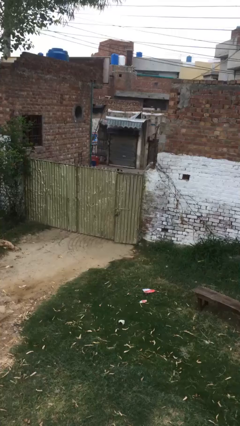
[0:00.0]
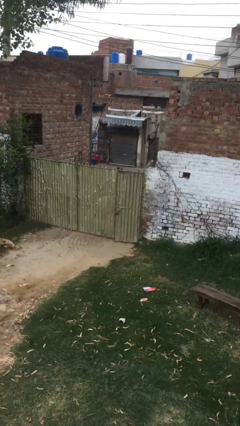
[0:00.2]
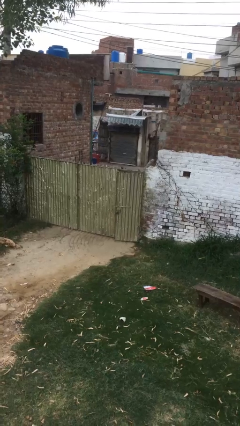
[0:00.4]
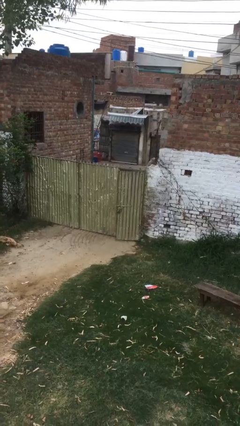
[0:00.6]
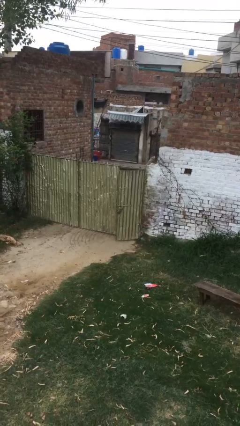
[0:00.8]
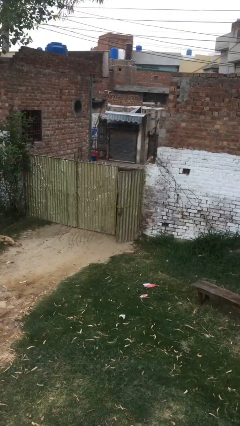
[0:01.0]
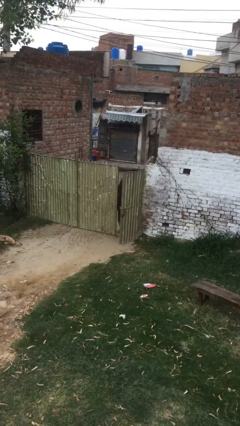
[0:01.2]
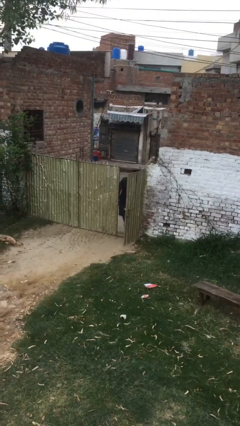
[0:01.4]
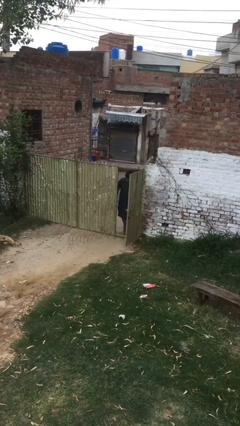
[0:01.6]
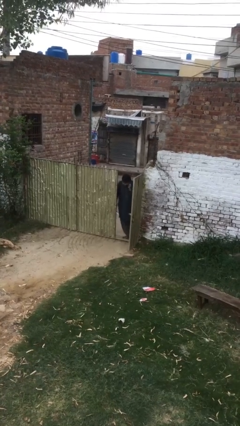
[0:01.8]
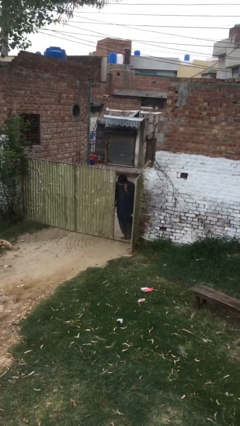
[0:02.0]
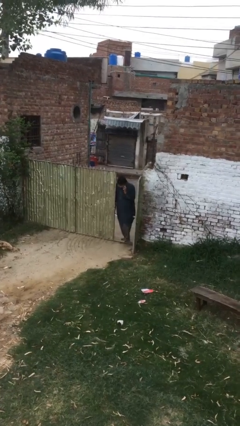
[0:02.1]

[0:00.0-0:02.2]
person opens facility door

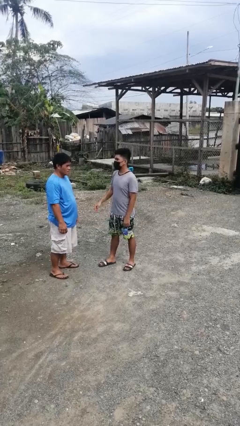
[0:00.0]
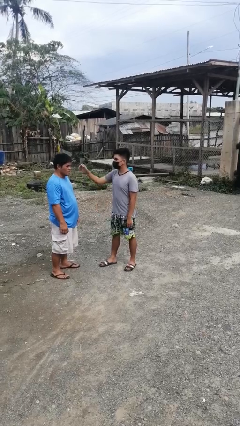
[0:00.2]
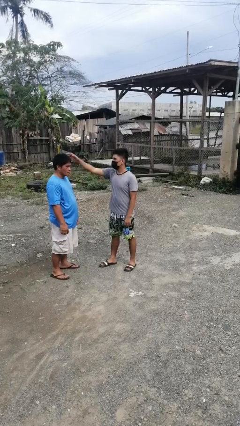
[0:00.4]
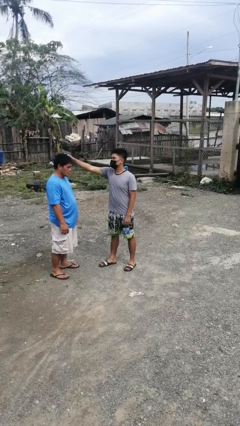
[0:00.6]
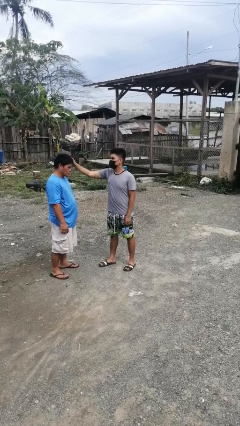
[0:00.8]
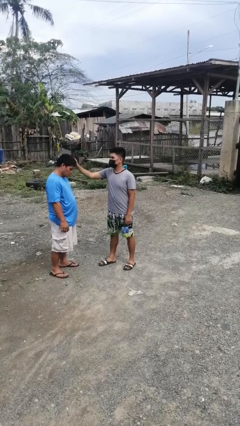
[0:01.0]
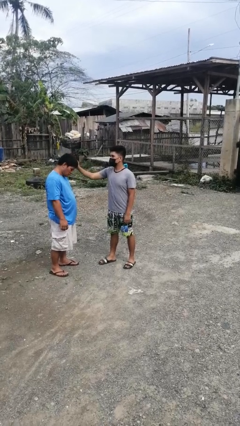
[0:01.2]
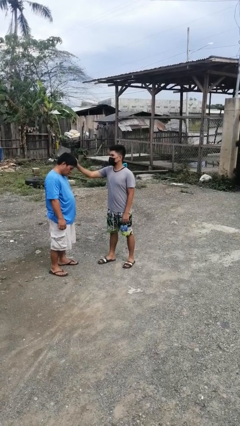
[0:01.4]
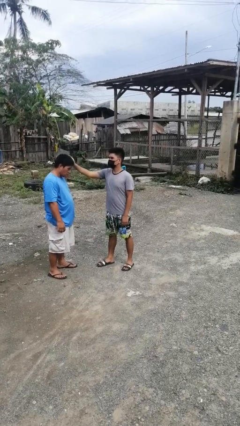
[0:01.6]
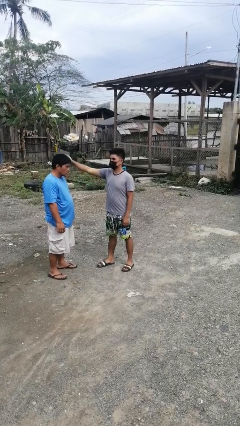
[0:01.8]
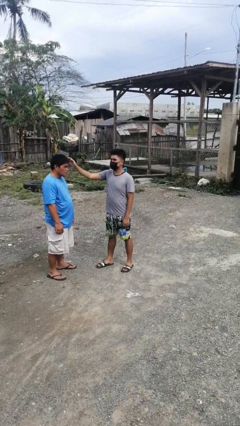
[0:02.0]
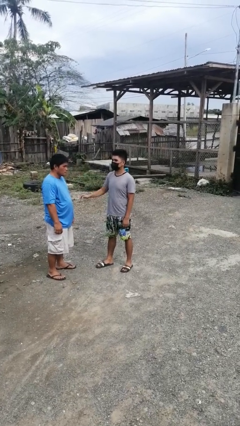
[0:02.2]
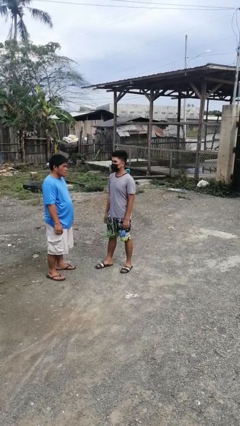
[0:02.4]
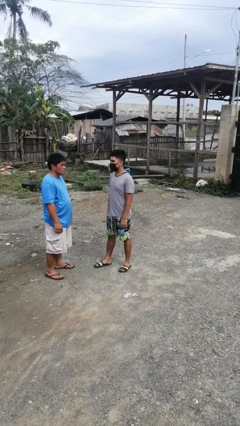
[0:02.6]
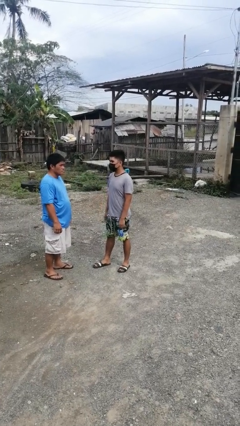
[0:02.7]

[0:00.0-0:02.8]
person grabs person by hair

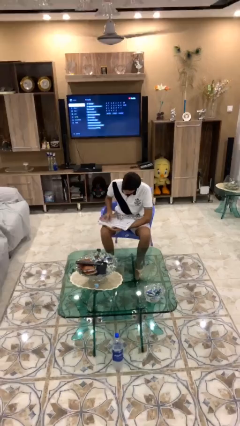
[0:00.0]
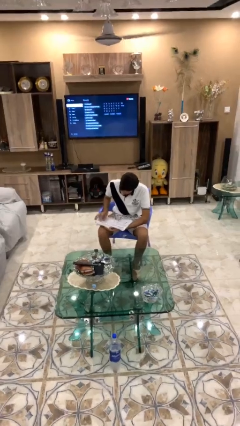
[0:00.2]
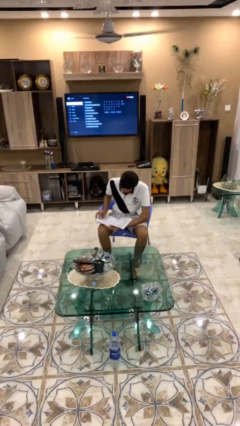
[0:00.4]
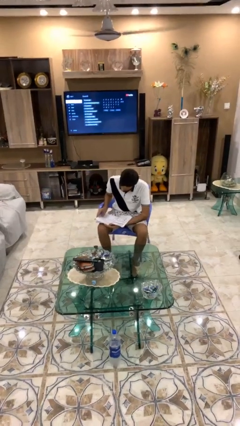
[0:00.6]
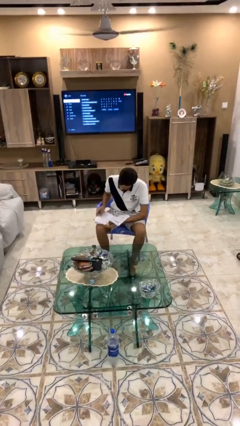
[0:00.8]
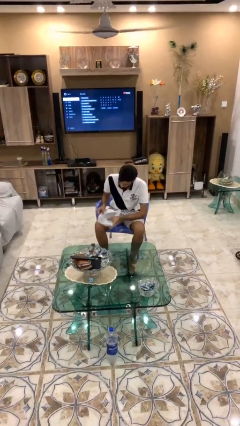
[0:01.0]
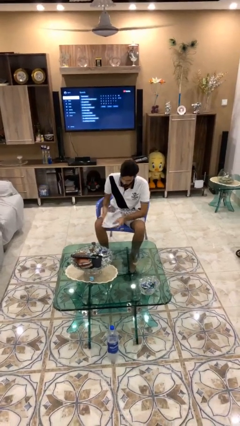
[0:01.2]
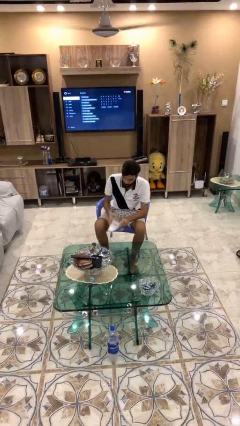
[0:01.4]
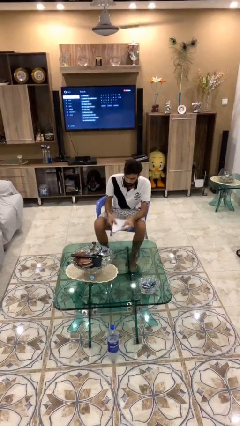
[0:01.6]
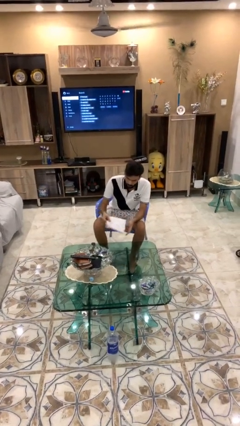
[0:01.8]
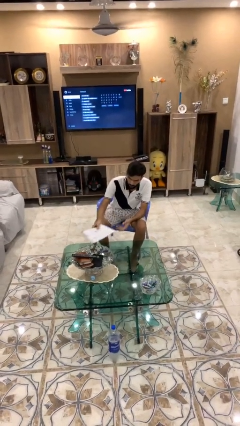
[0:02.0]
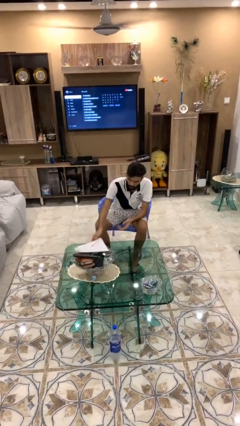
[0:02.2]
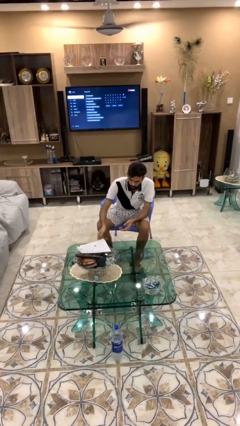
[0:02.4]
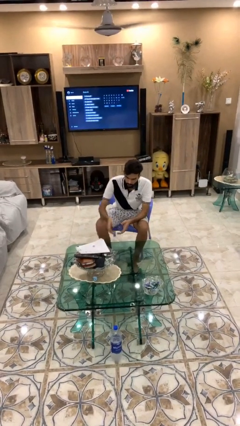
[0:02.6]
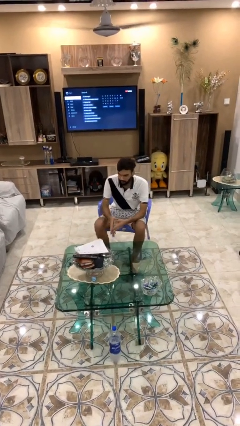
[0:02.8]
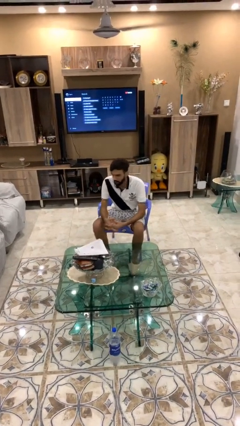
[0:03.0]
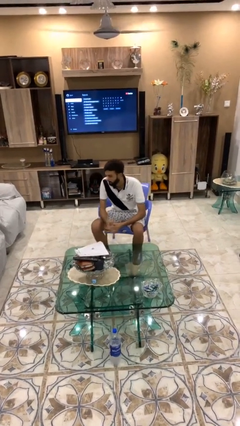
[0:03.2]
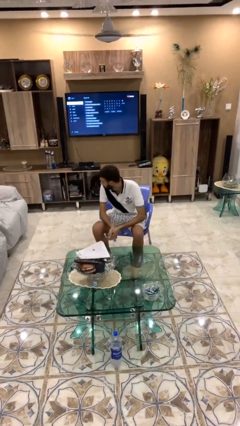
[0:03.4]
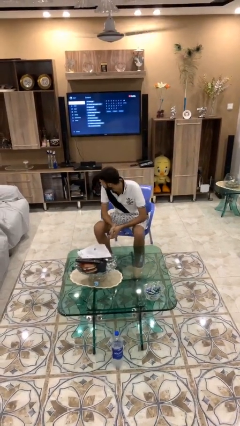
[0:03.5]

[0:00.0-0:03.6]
person puts down object on table

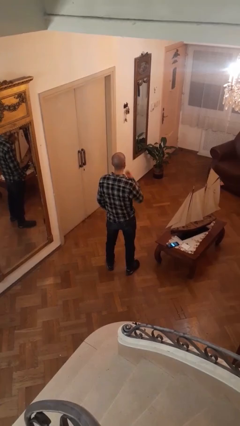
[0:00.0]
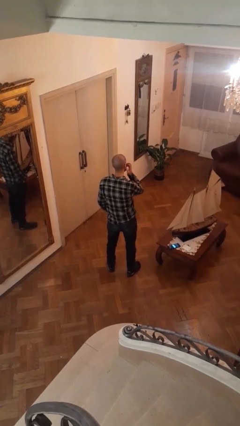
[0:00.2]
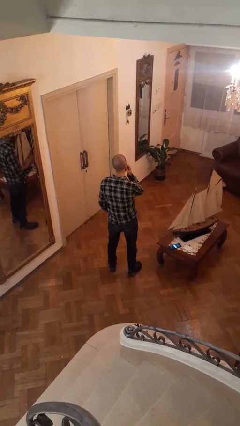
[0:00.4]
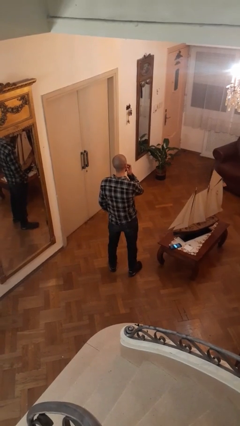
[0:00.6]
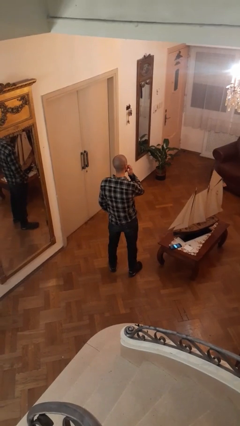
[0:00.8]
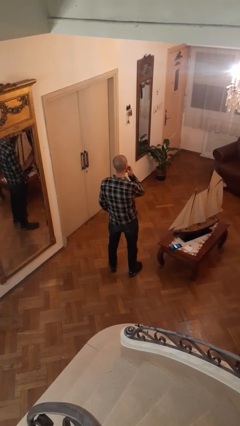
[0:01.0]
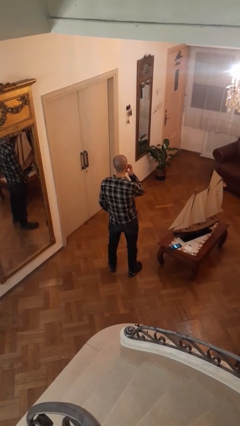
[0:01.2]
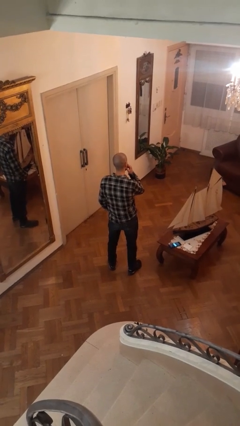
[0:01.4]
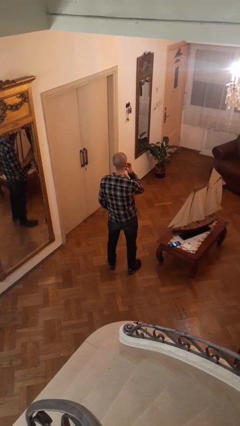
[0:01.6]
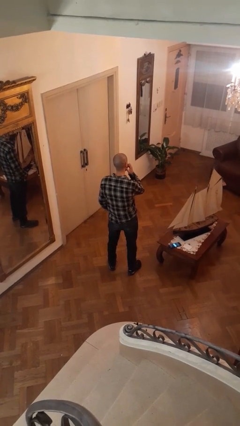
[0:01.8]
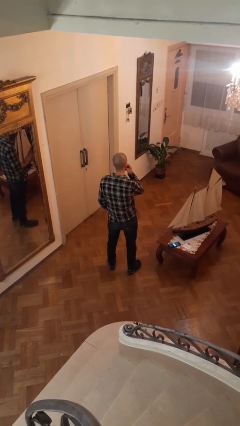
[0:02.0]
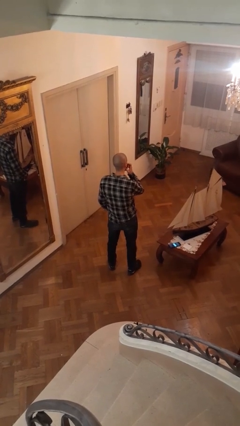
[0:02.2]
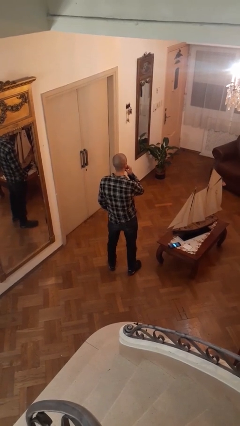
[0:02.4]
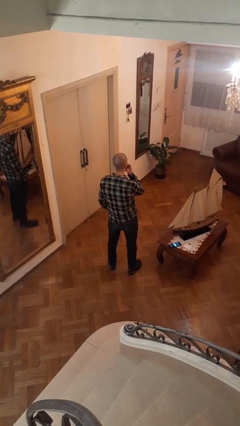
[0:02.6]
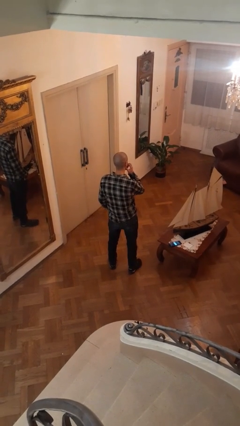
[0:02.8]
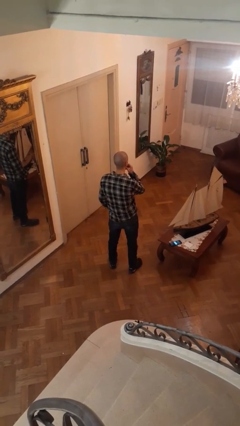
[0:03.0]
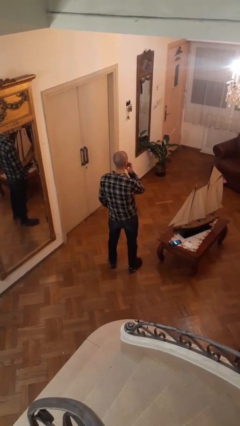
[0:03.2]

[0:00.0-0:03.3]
person scratches face

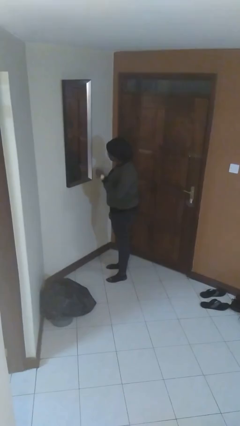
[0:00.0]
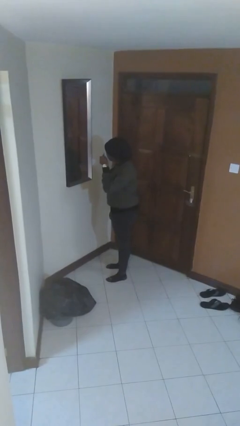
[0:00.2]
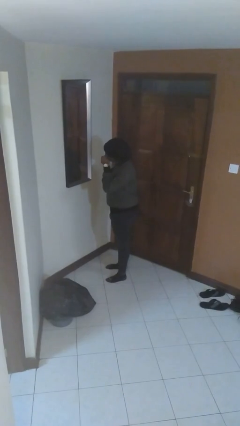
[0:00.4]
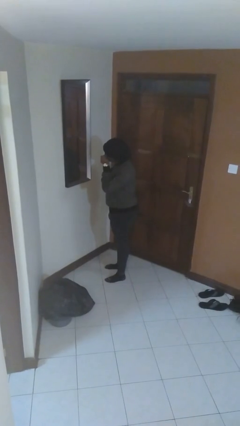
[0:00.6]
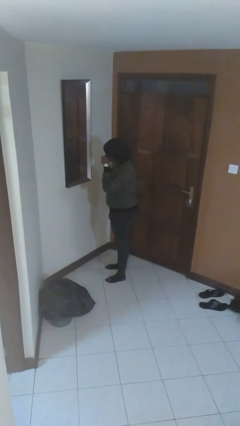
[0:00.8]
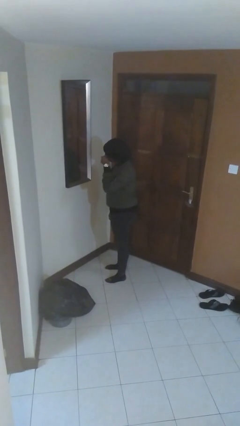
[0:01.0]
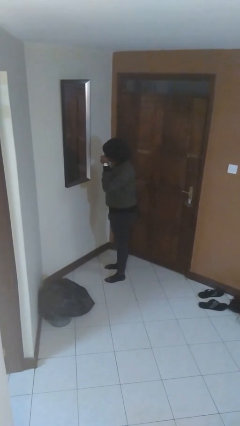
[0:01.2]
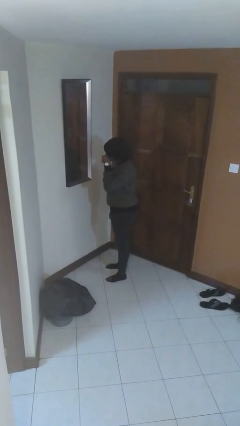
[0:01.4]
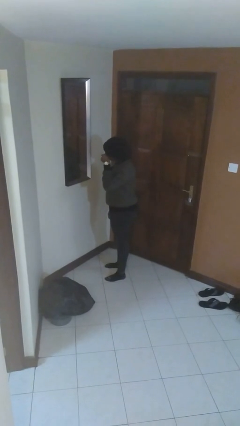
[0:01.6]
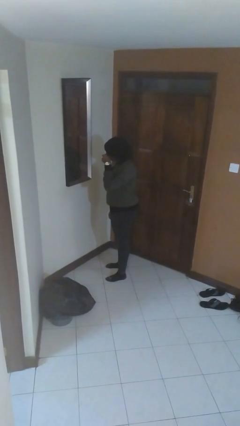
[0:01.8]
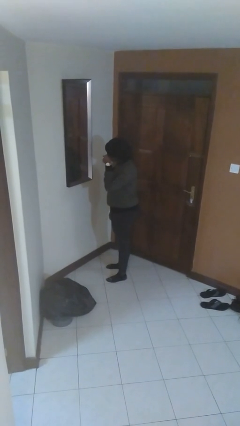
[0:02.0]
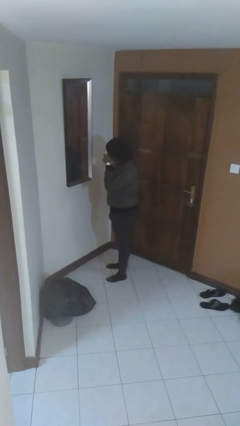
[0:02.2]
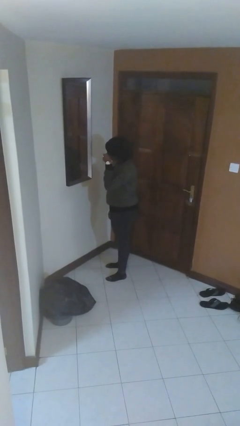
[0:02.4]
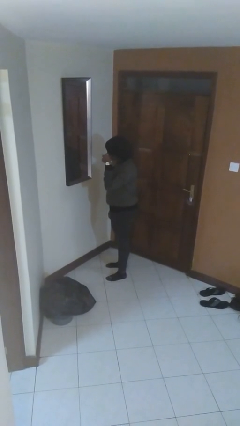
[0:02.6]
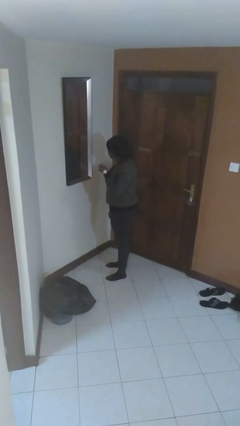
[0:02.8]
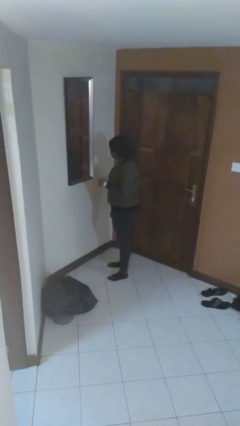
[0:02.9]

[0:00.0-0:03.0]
person applies eye makeup

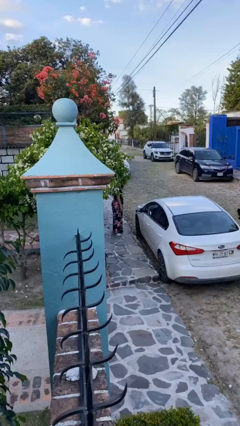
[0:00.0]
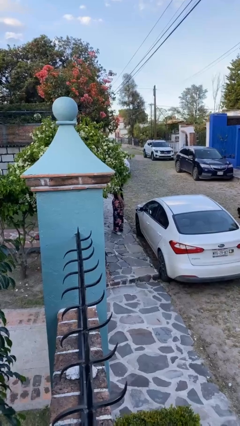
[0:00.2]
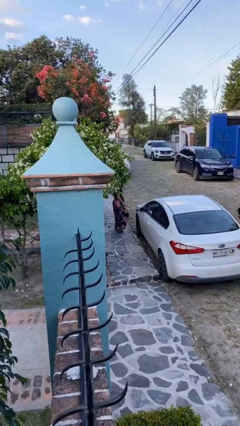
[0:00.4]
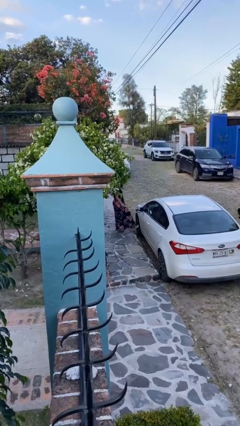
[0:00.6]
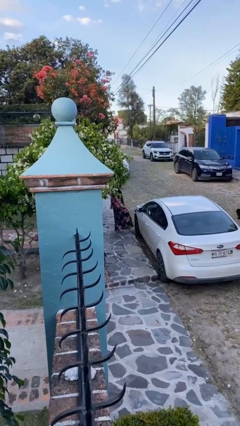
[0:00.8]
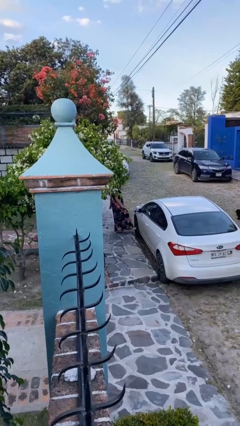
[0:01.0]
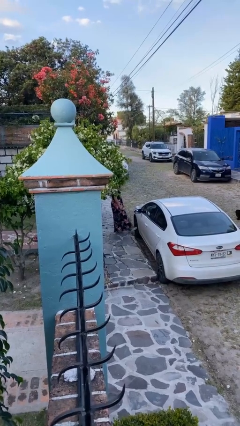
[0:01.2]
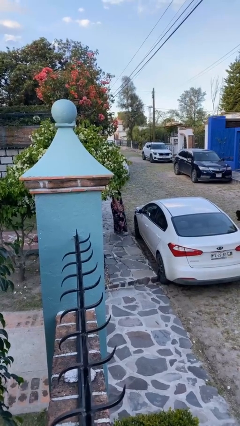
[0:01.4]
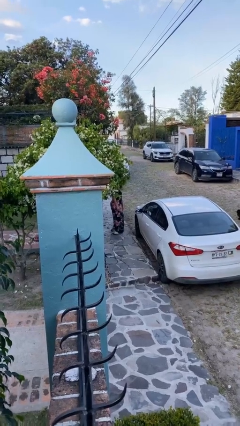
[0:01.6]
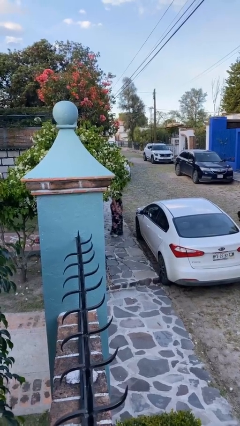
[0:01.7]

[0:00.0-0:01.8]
person kicks car tires

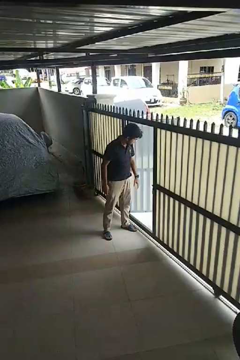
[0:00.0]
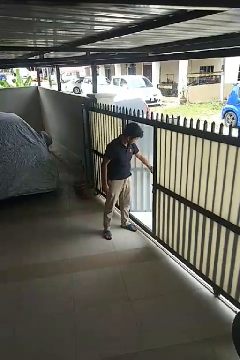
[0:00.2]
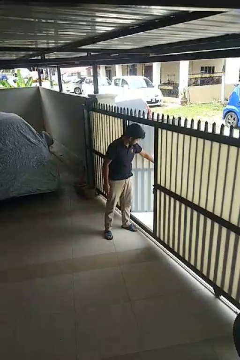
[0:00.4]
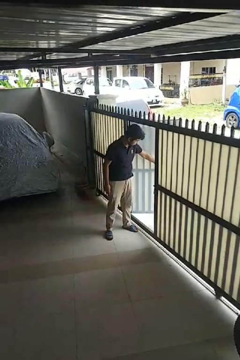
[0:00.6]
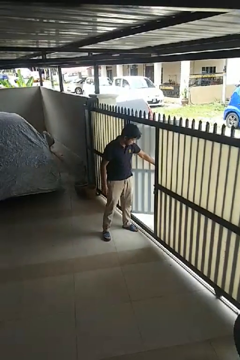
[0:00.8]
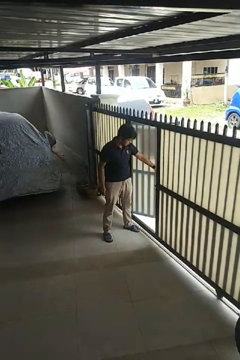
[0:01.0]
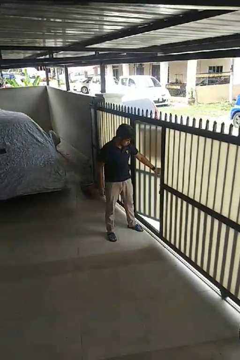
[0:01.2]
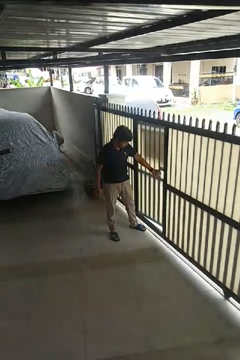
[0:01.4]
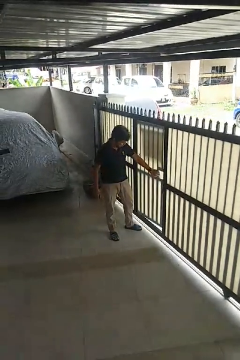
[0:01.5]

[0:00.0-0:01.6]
person closes gate
